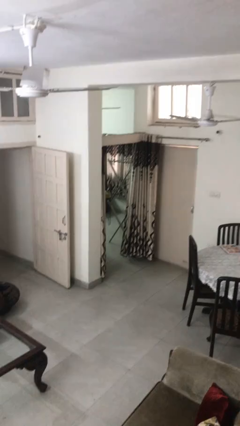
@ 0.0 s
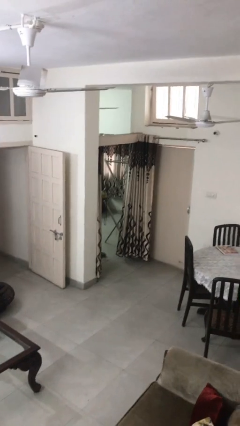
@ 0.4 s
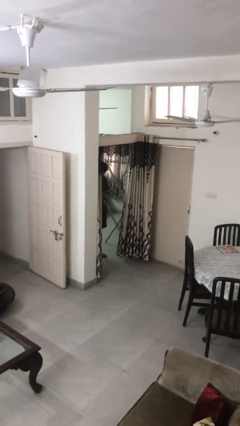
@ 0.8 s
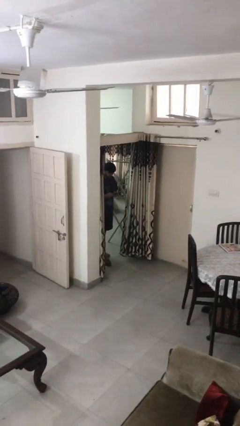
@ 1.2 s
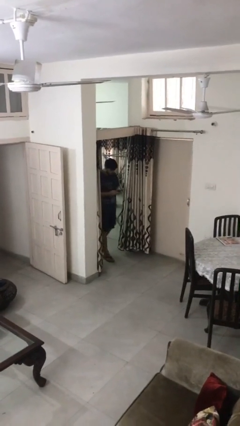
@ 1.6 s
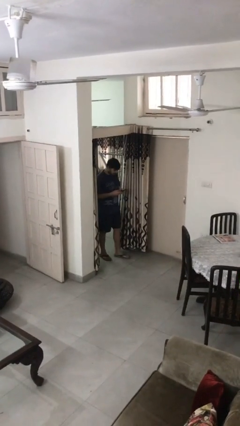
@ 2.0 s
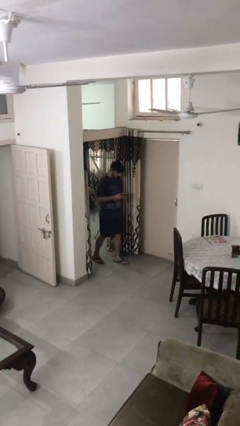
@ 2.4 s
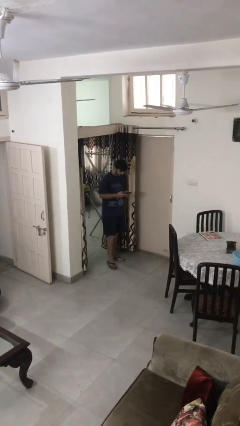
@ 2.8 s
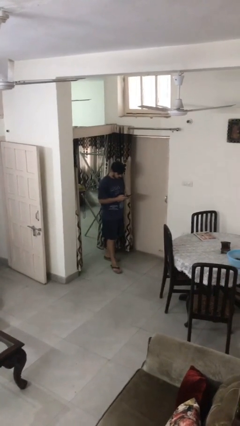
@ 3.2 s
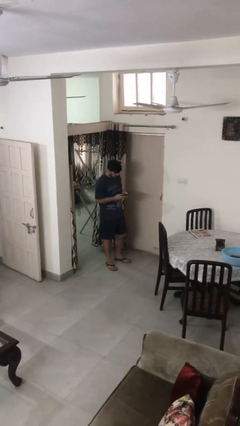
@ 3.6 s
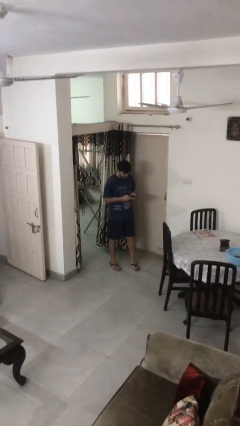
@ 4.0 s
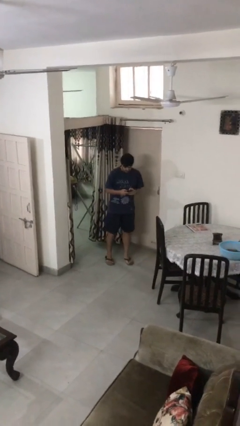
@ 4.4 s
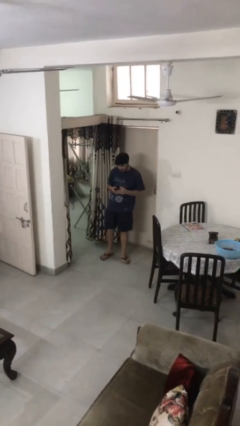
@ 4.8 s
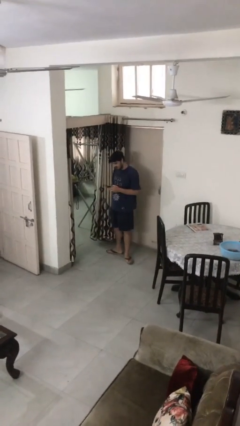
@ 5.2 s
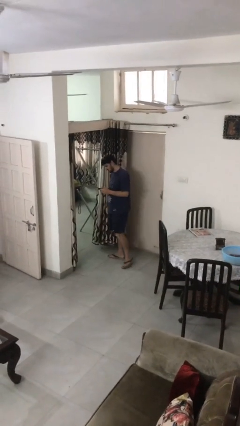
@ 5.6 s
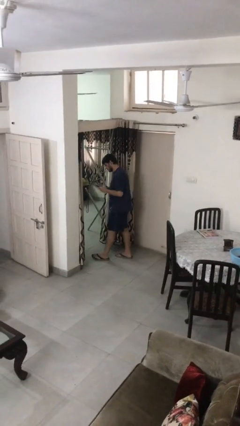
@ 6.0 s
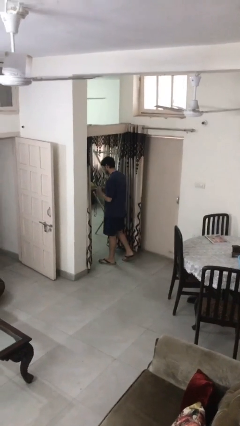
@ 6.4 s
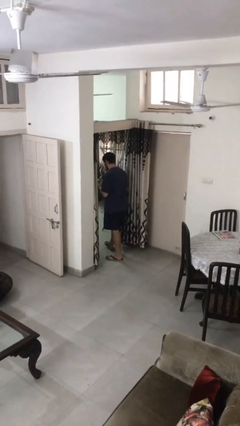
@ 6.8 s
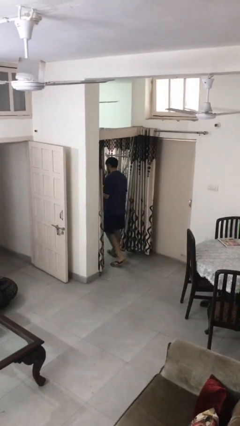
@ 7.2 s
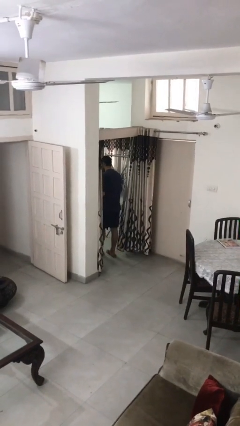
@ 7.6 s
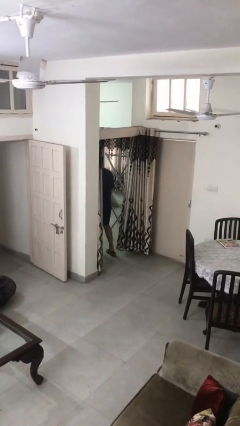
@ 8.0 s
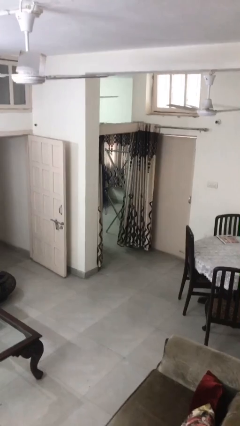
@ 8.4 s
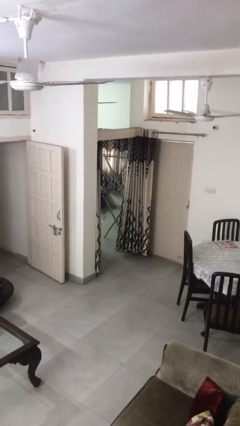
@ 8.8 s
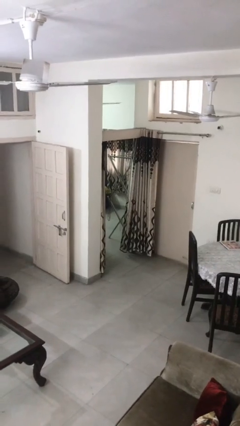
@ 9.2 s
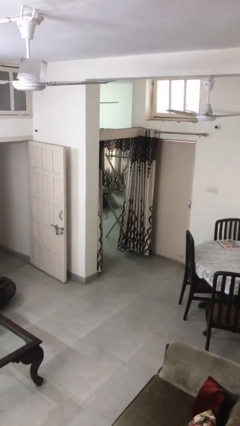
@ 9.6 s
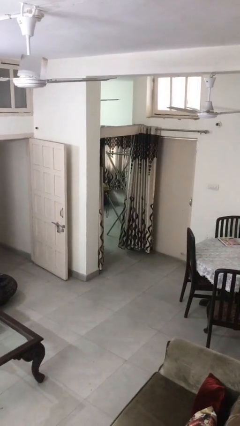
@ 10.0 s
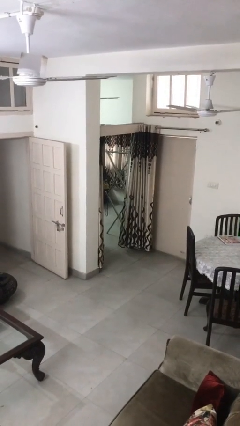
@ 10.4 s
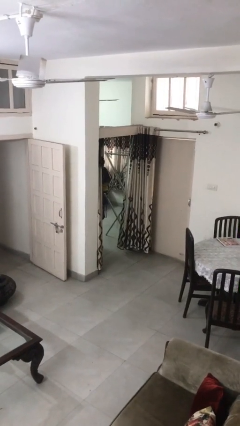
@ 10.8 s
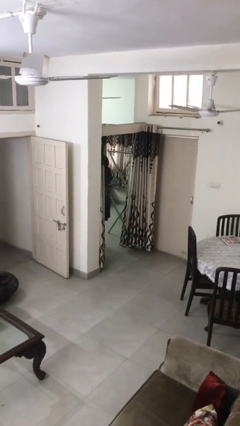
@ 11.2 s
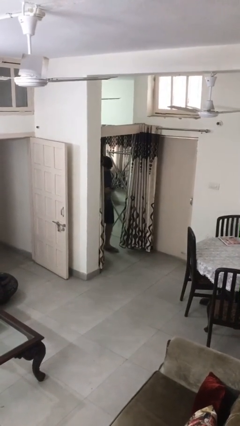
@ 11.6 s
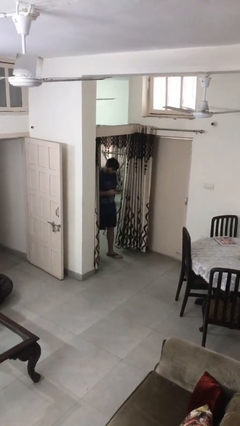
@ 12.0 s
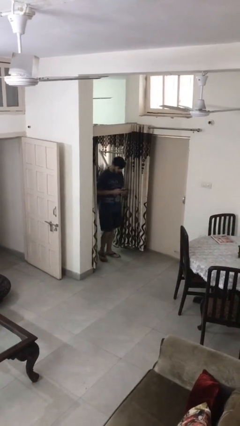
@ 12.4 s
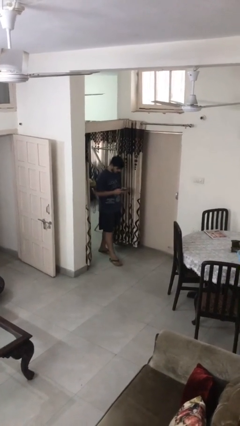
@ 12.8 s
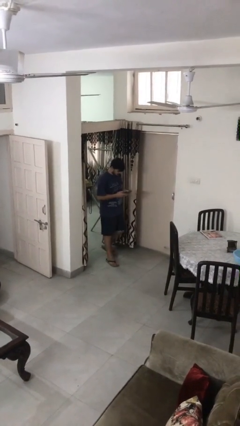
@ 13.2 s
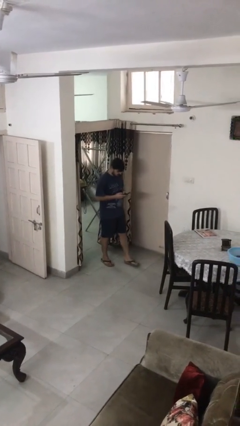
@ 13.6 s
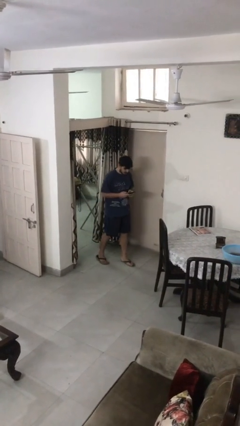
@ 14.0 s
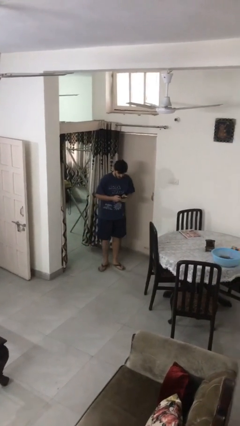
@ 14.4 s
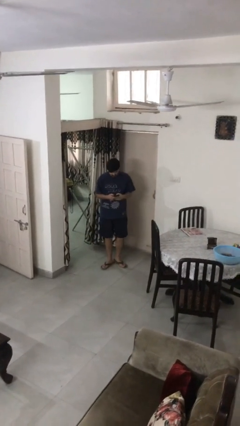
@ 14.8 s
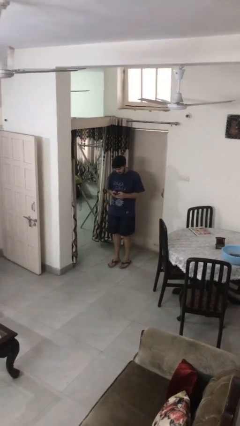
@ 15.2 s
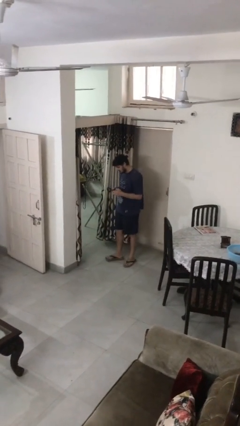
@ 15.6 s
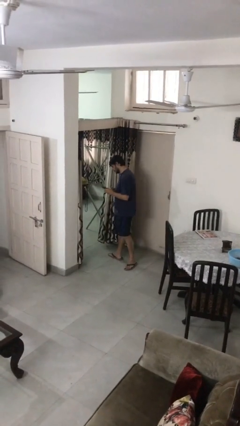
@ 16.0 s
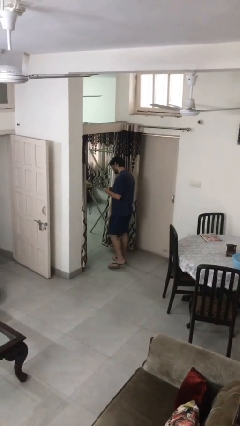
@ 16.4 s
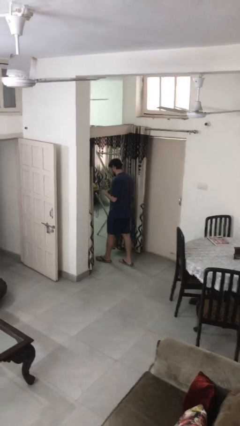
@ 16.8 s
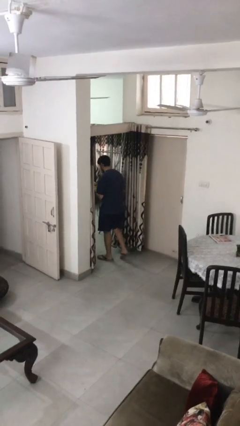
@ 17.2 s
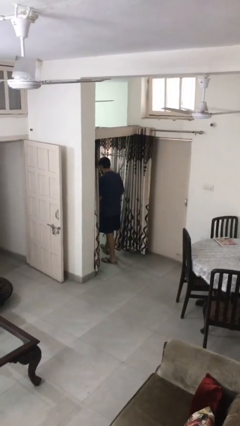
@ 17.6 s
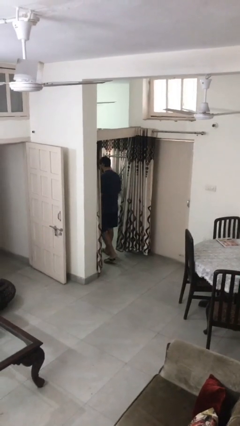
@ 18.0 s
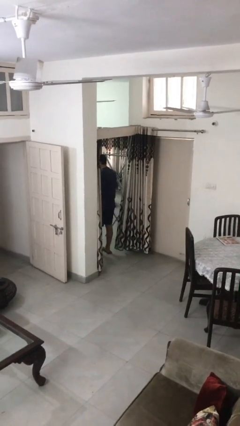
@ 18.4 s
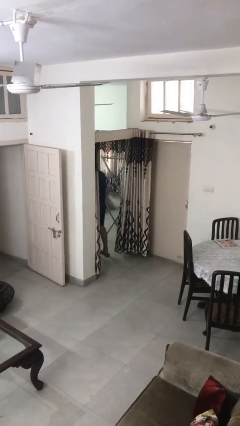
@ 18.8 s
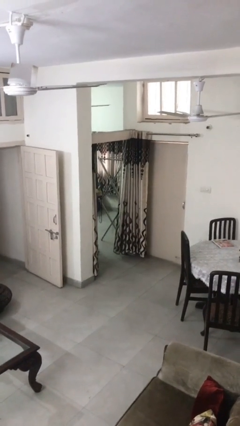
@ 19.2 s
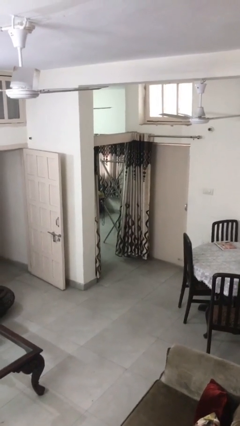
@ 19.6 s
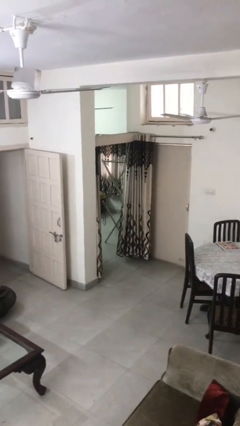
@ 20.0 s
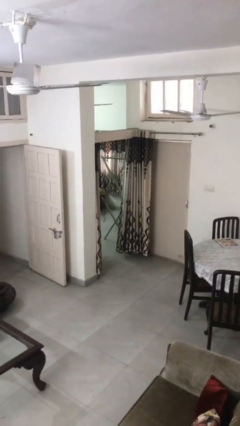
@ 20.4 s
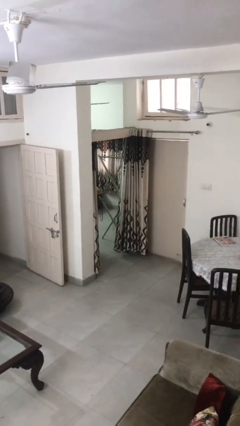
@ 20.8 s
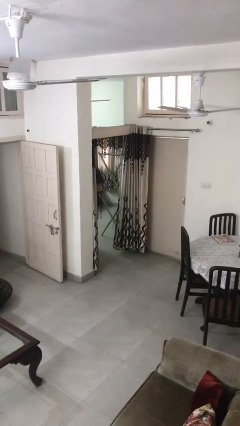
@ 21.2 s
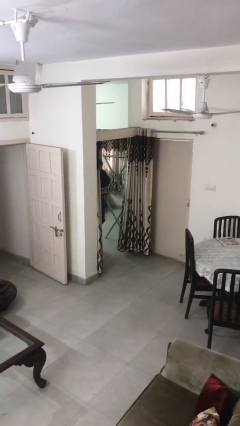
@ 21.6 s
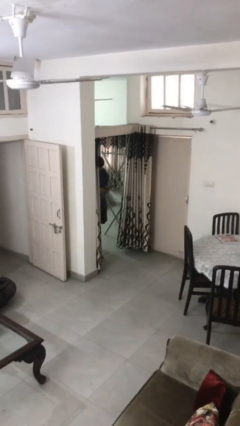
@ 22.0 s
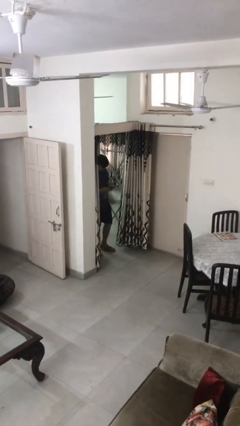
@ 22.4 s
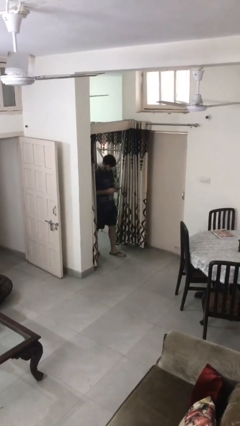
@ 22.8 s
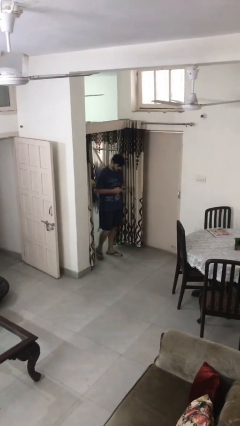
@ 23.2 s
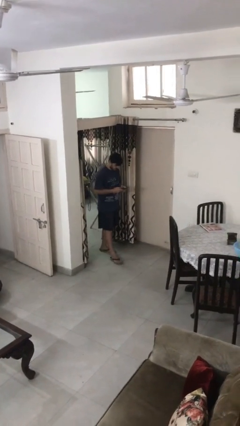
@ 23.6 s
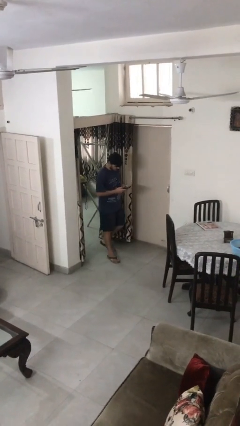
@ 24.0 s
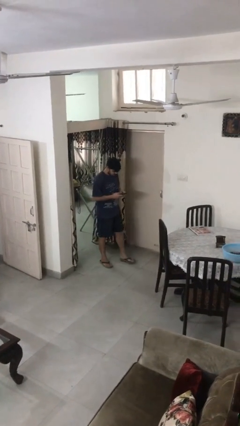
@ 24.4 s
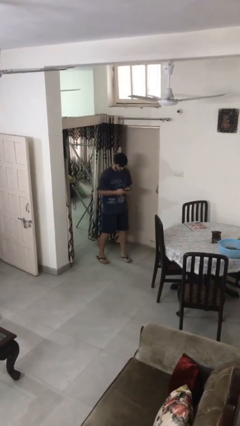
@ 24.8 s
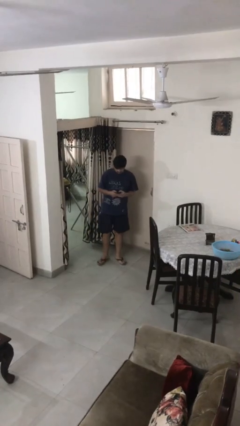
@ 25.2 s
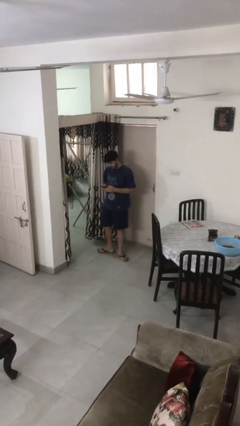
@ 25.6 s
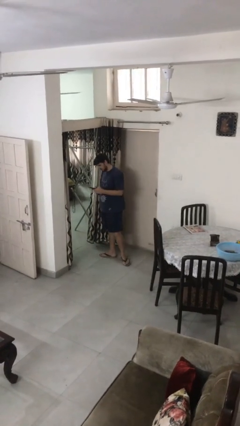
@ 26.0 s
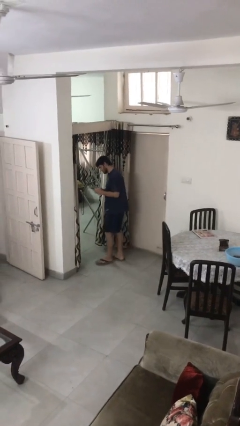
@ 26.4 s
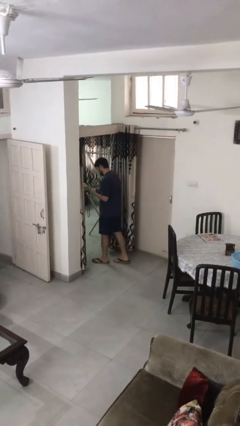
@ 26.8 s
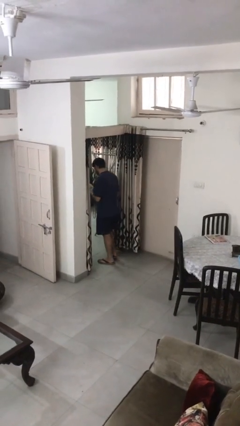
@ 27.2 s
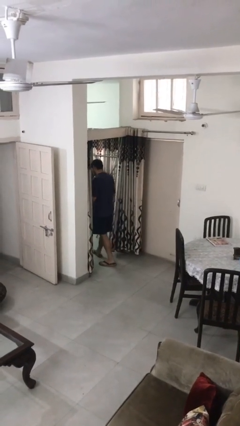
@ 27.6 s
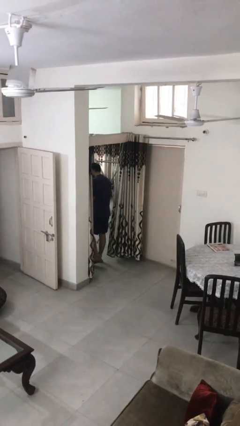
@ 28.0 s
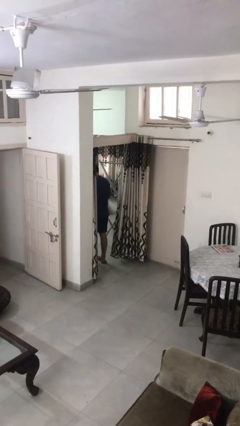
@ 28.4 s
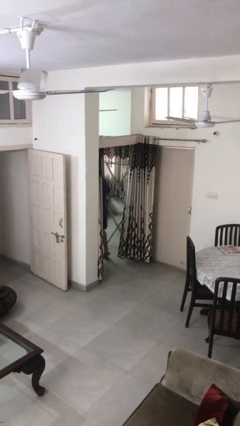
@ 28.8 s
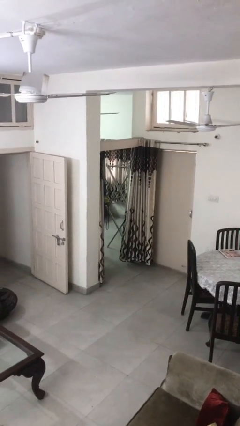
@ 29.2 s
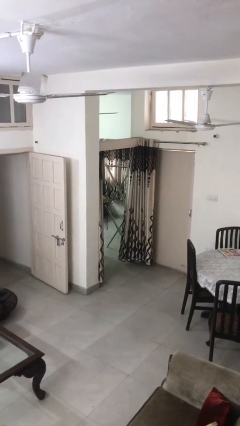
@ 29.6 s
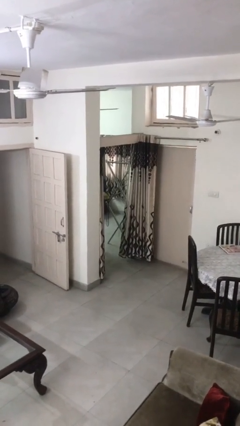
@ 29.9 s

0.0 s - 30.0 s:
person texts on phone

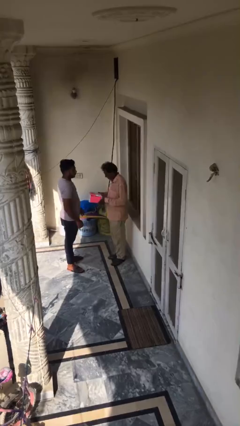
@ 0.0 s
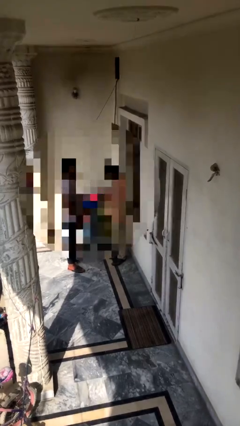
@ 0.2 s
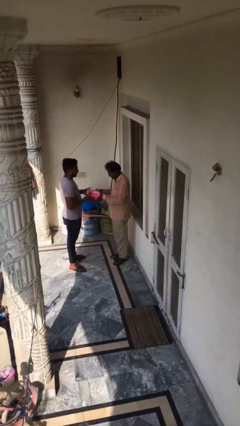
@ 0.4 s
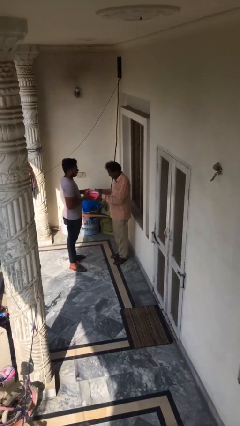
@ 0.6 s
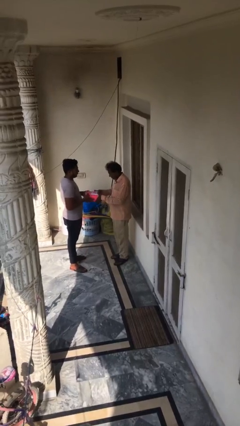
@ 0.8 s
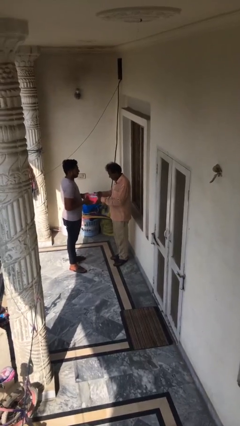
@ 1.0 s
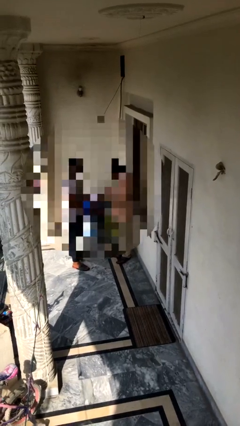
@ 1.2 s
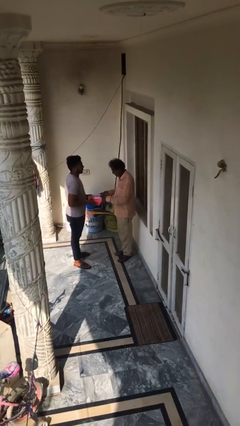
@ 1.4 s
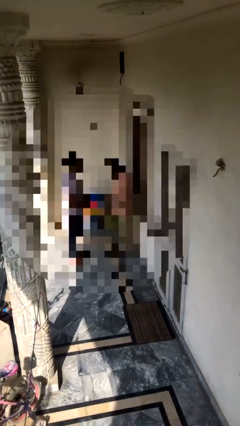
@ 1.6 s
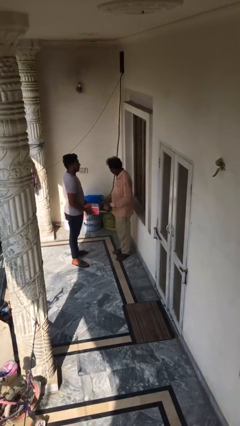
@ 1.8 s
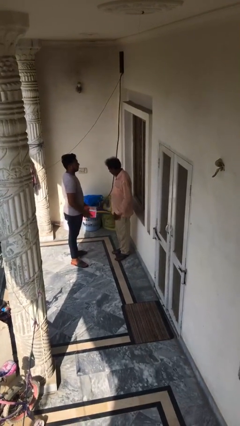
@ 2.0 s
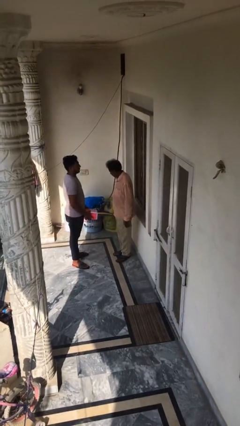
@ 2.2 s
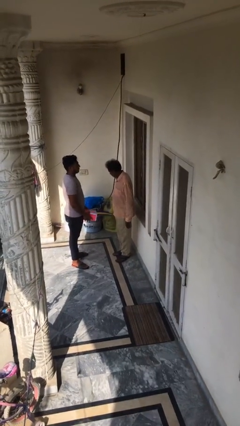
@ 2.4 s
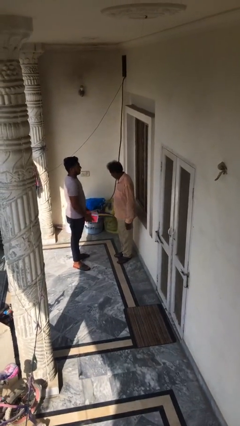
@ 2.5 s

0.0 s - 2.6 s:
person transfers object to person

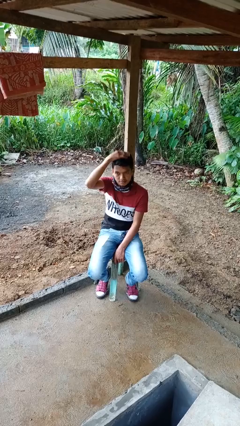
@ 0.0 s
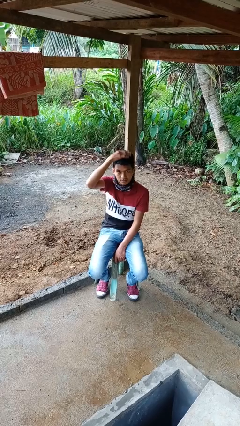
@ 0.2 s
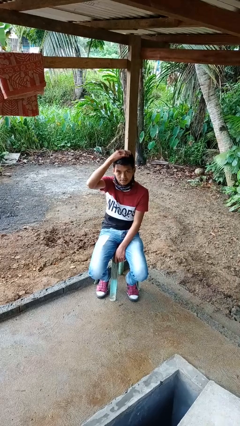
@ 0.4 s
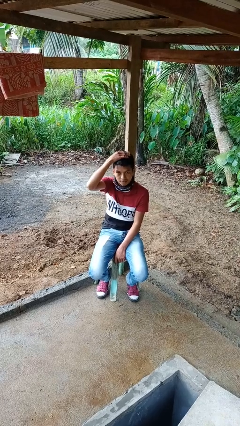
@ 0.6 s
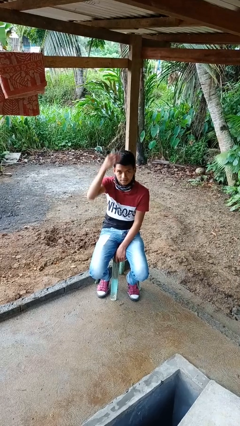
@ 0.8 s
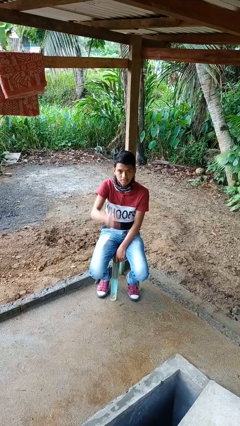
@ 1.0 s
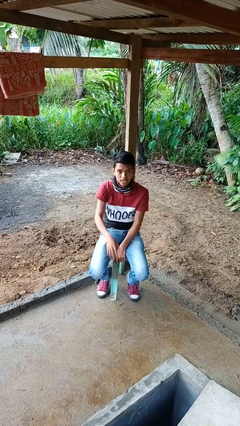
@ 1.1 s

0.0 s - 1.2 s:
person pats head
